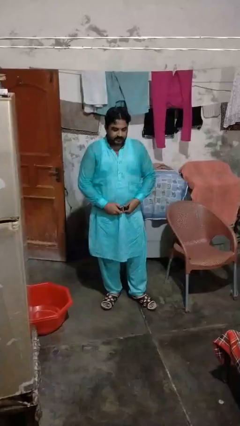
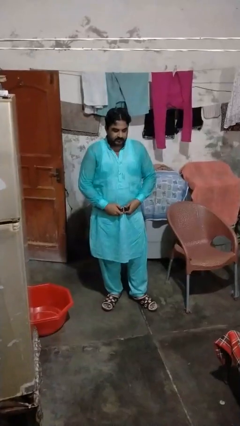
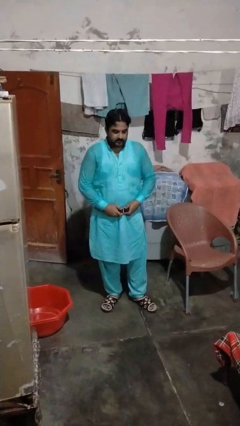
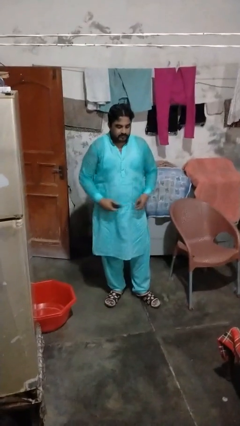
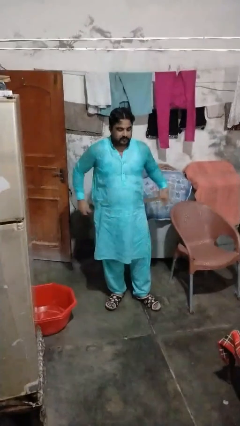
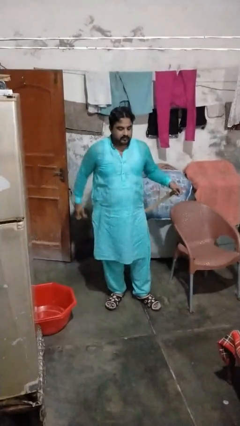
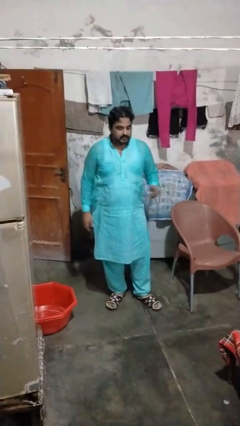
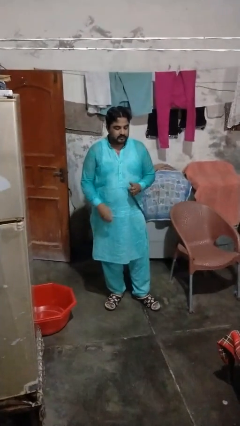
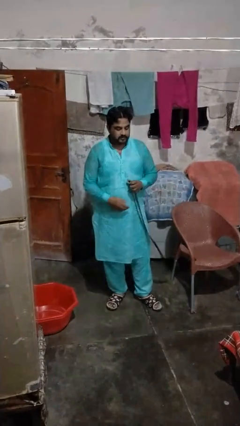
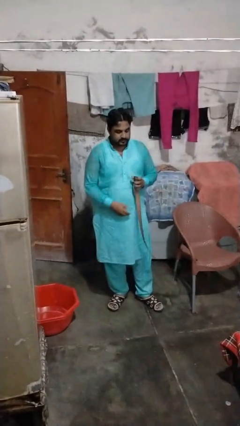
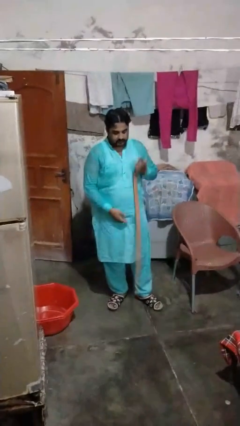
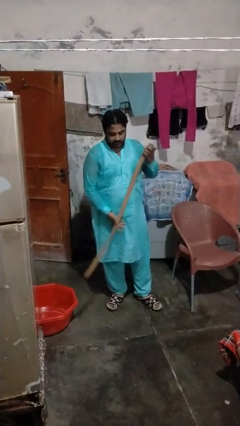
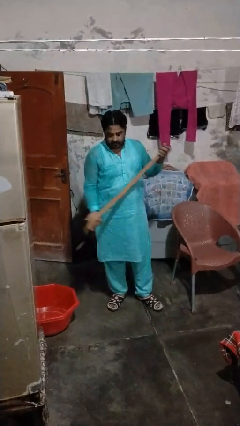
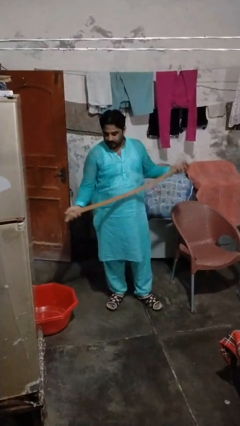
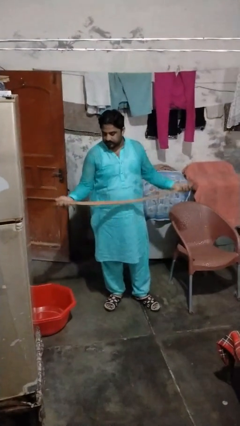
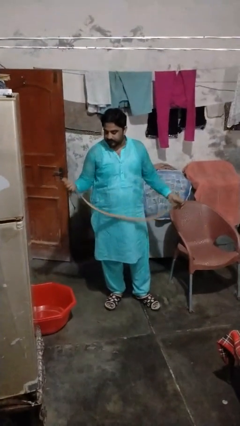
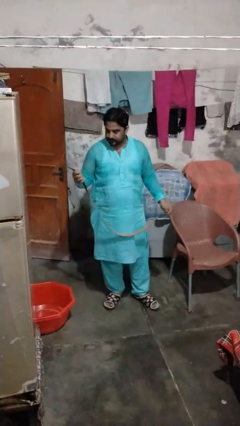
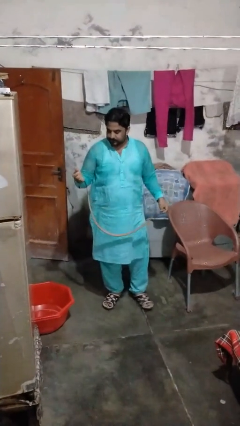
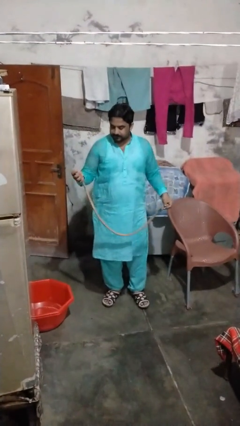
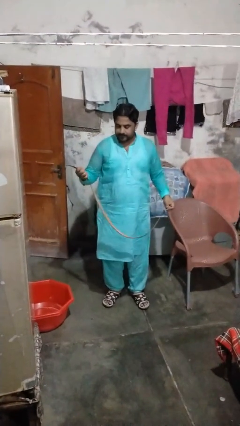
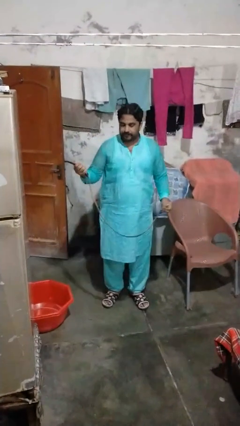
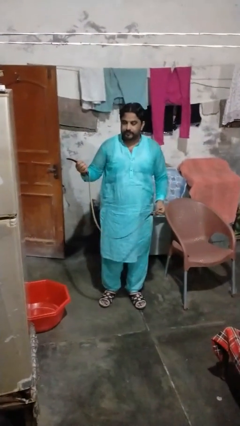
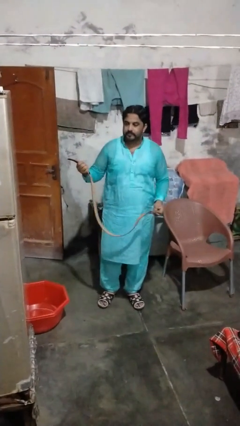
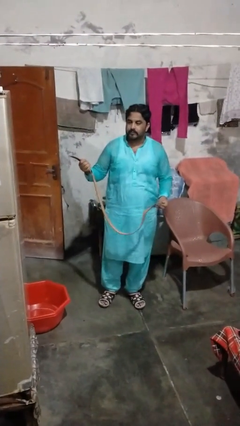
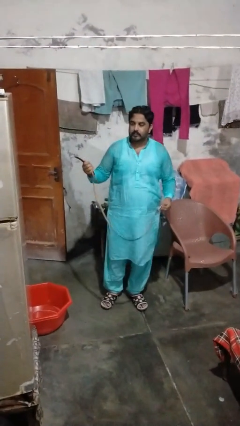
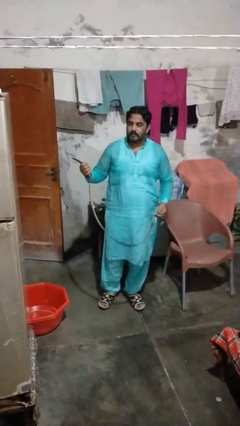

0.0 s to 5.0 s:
person takes off belt

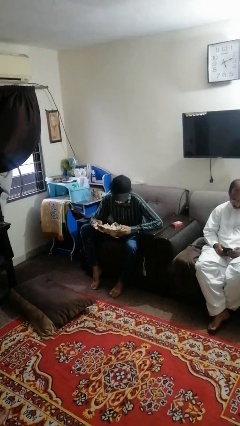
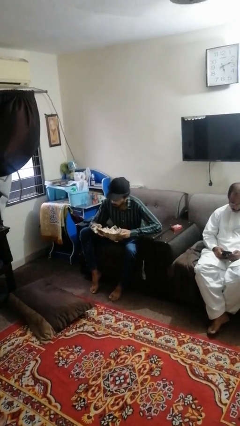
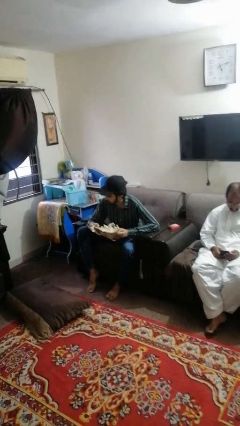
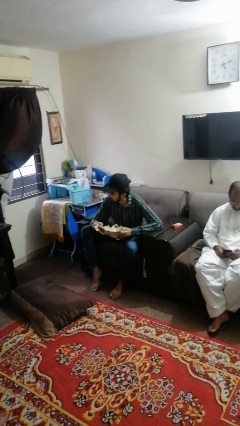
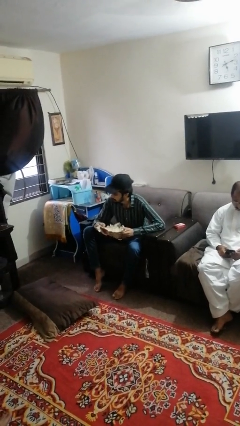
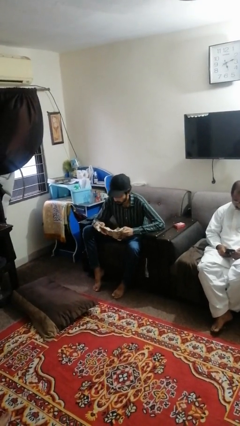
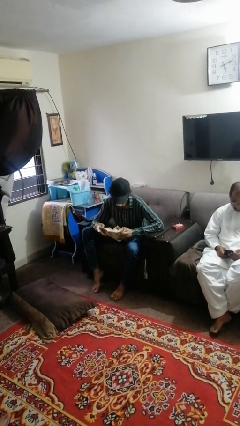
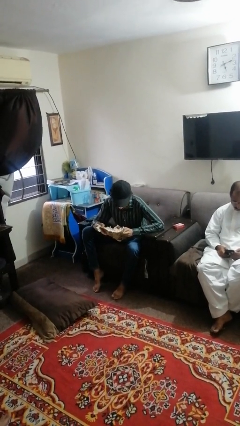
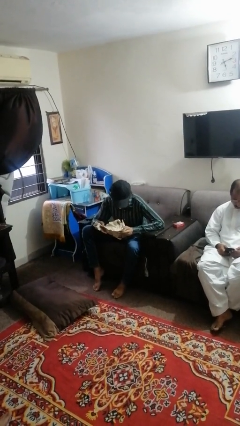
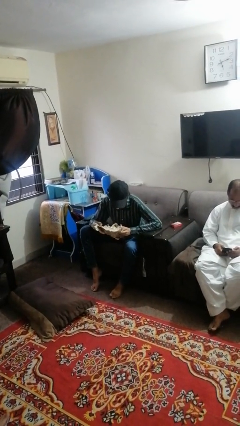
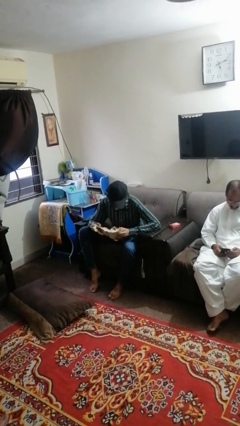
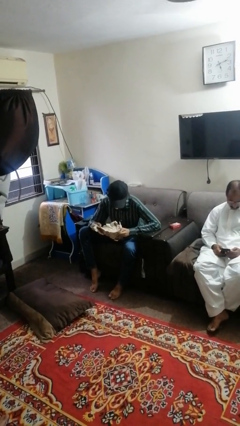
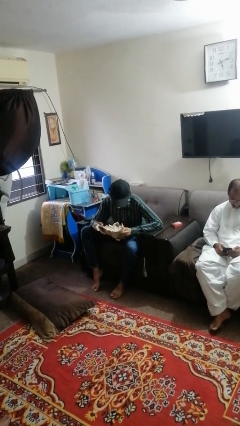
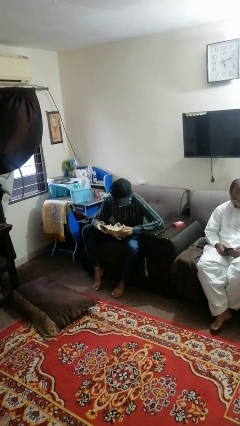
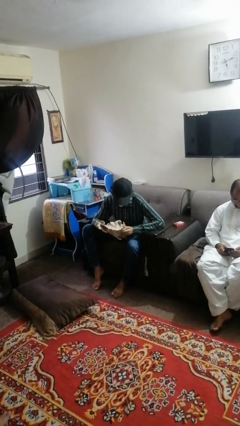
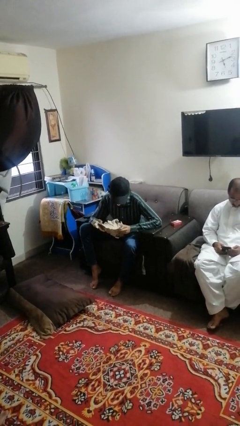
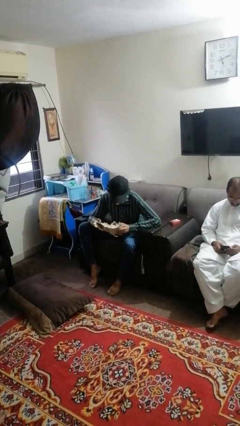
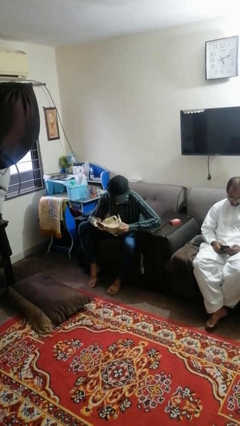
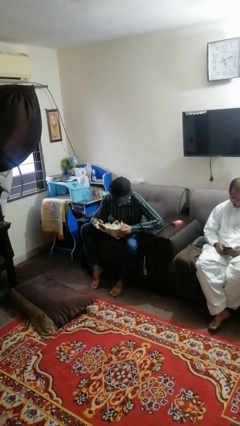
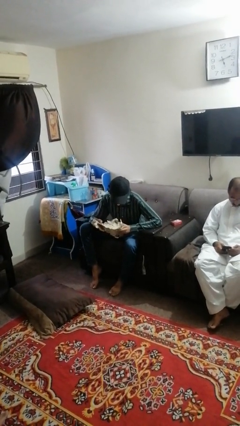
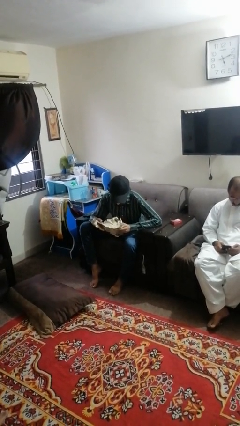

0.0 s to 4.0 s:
person reads newspaper

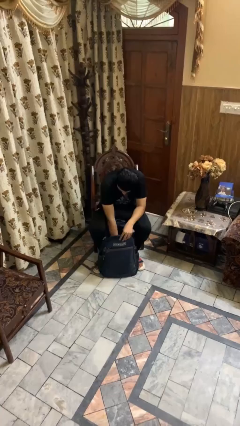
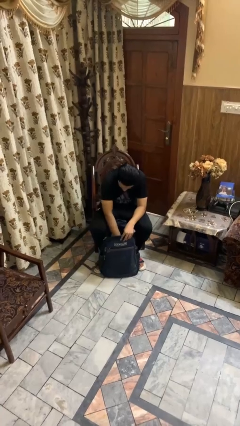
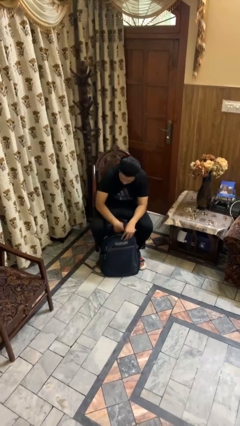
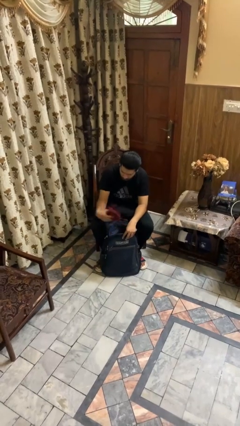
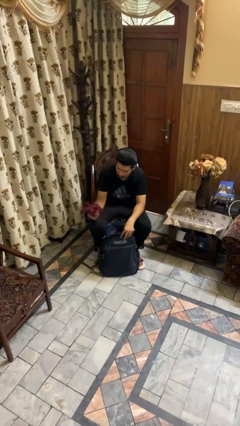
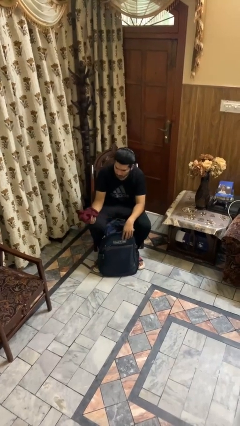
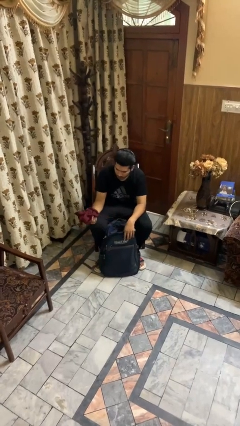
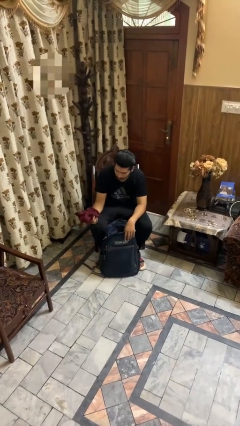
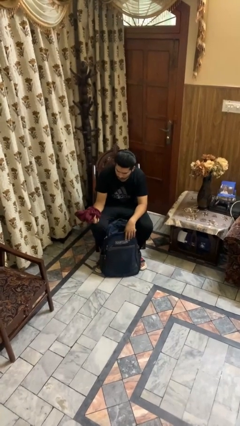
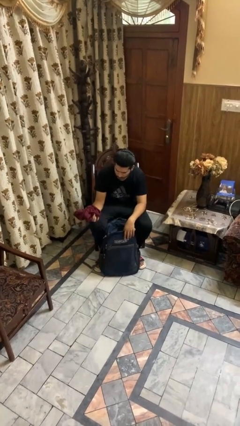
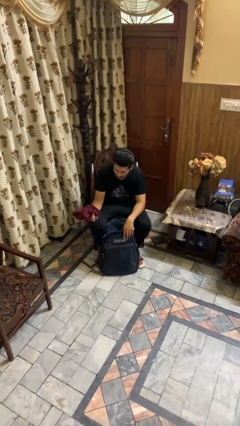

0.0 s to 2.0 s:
person takes object from backpack

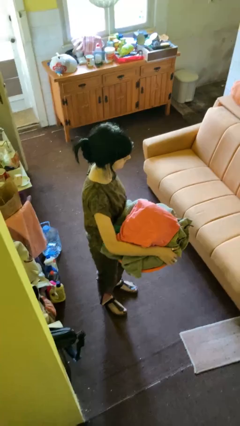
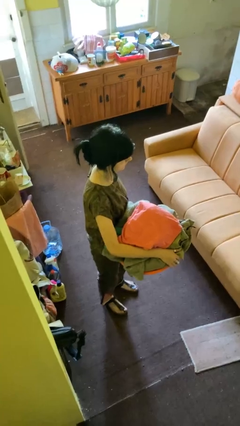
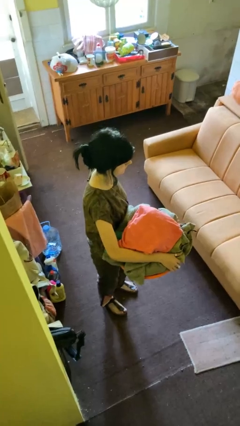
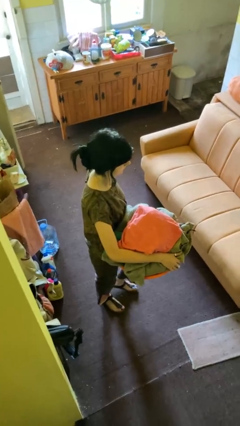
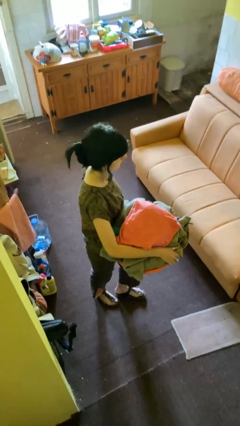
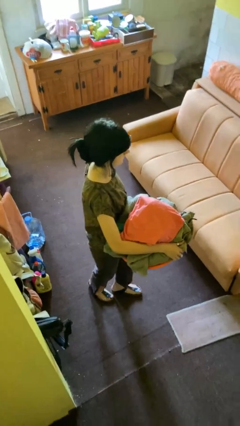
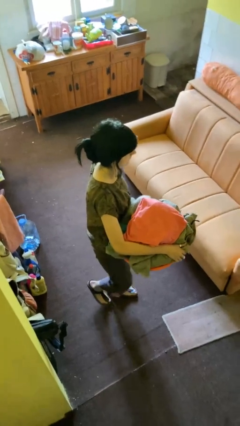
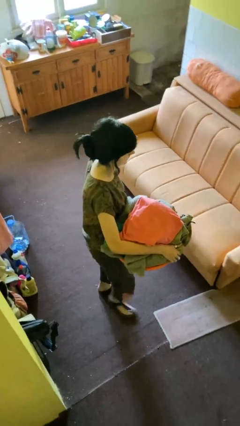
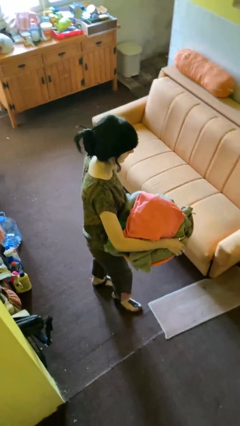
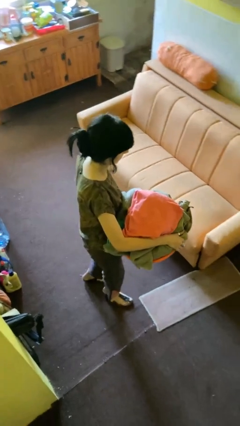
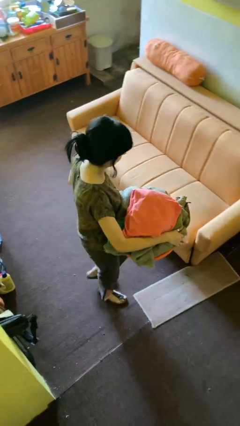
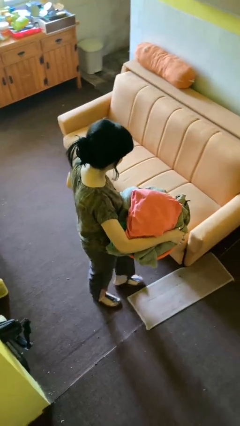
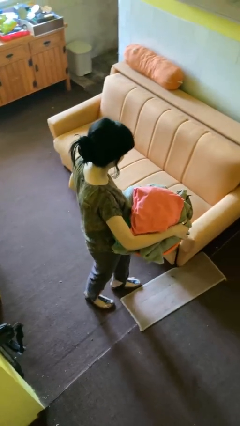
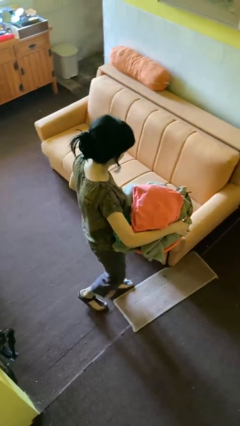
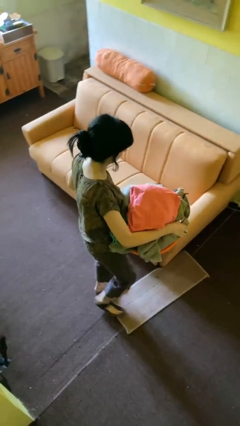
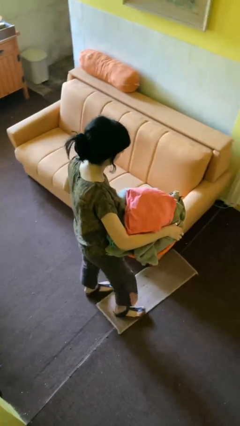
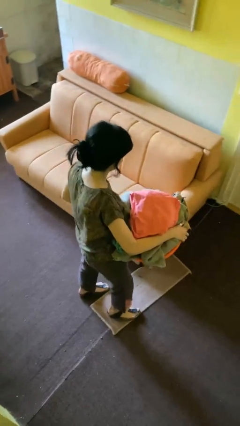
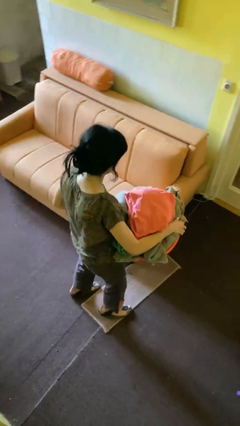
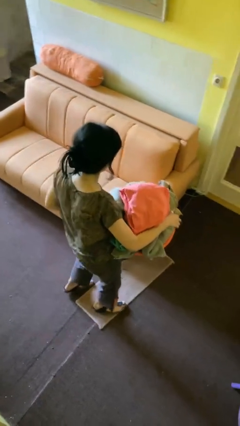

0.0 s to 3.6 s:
person carries laundry basket

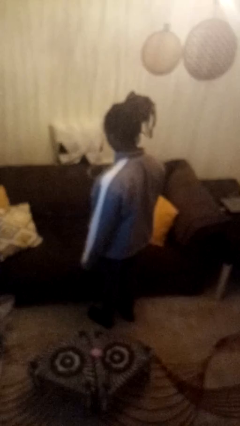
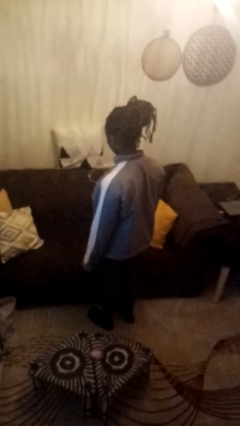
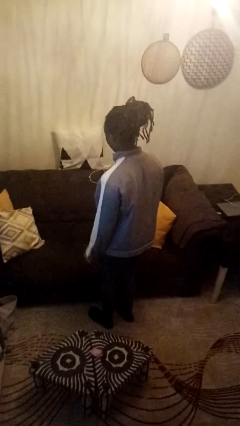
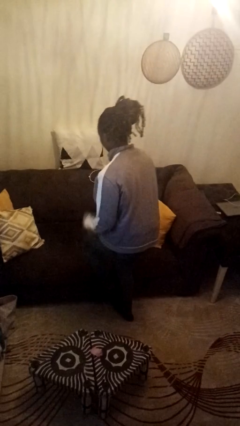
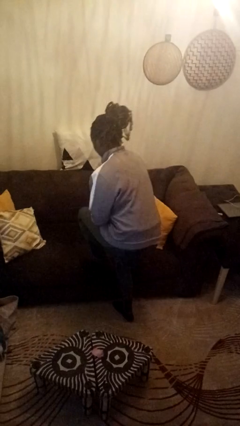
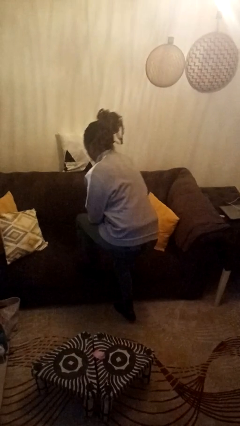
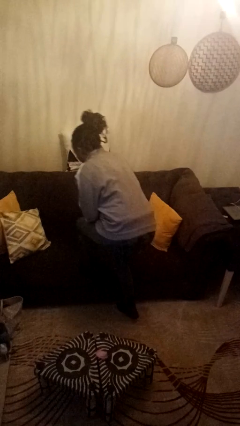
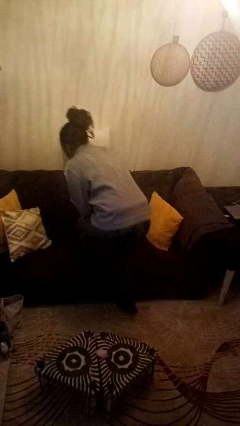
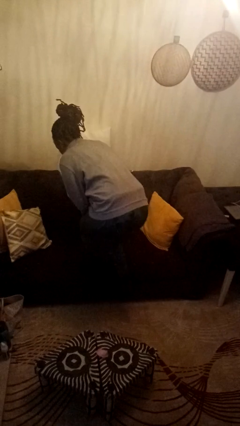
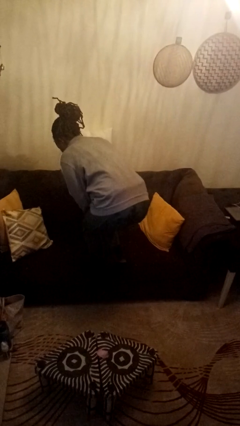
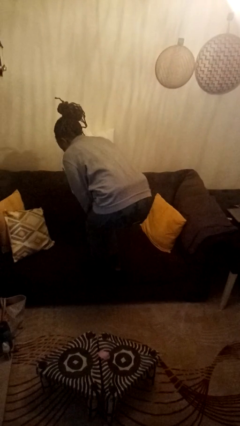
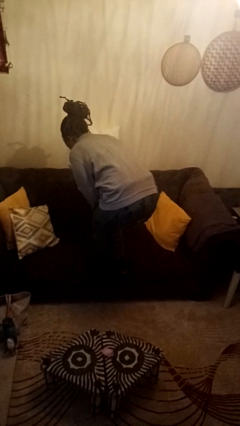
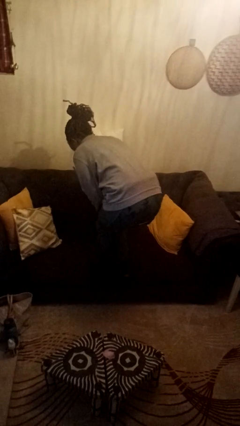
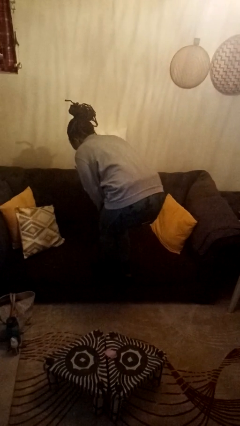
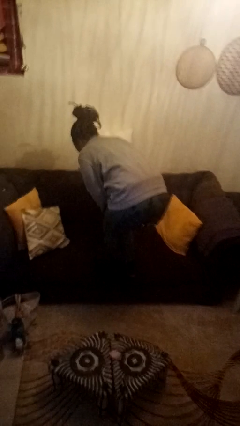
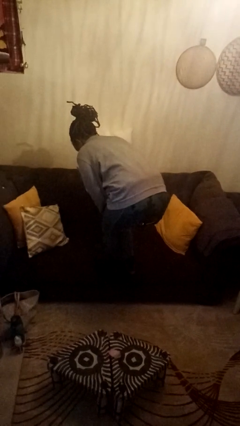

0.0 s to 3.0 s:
person climbs on couch
